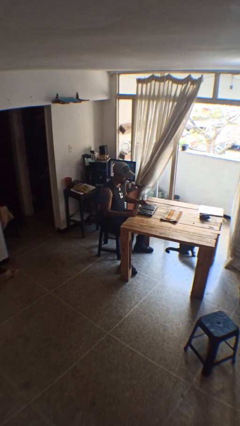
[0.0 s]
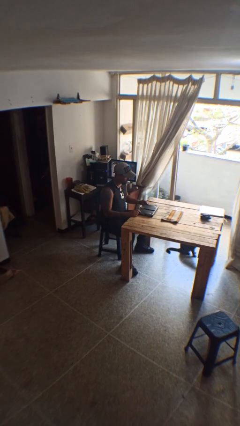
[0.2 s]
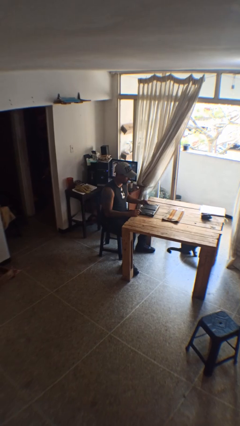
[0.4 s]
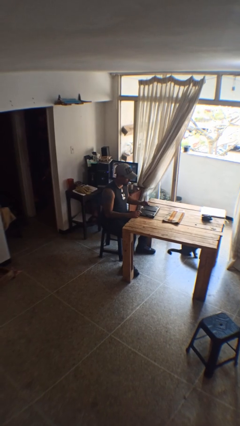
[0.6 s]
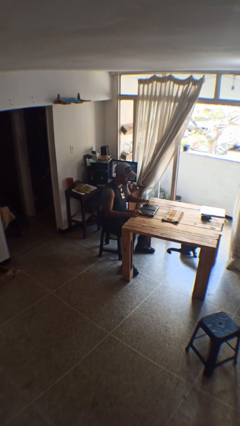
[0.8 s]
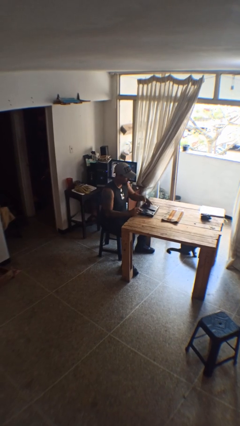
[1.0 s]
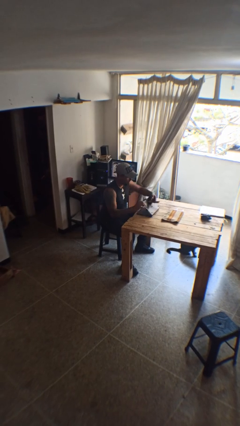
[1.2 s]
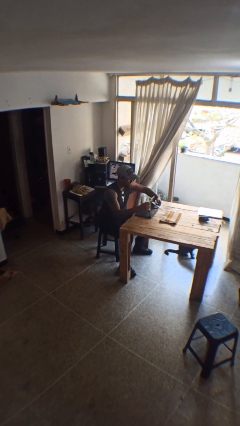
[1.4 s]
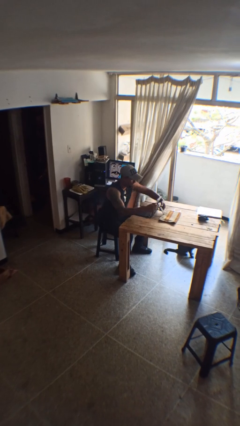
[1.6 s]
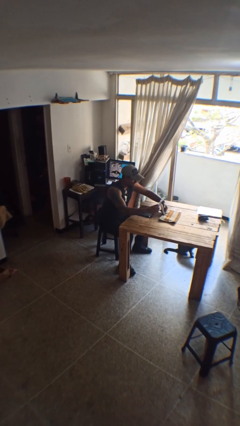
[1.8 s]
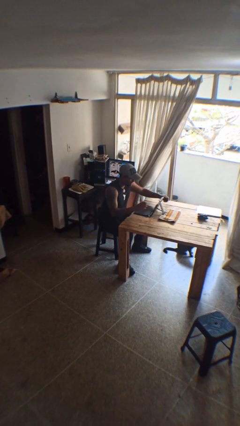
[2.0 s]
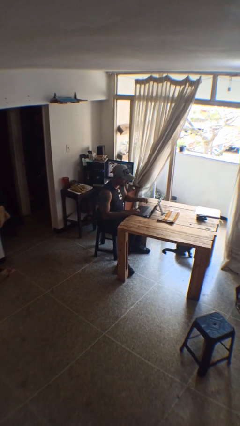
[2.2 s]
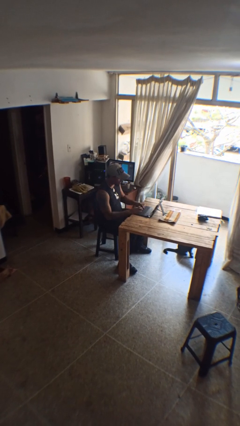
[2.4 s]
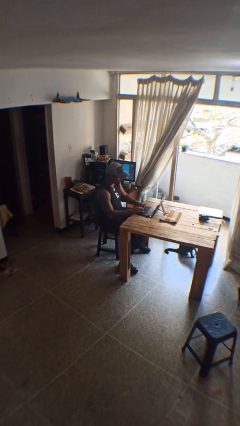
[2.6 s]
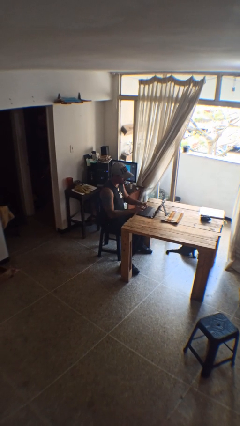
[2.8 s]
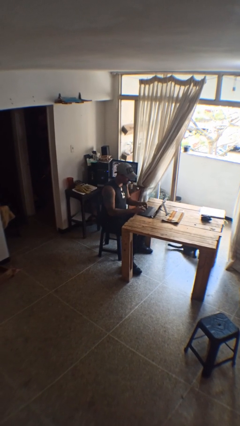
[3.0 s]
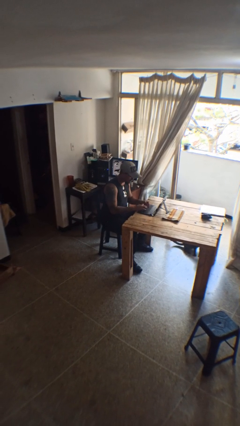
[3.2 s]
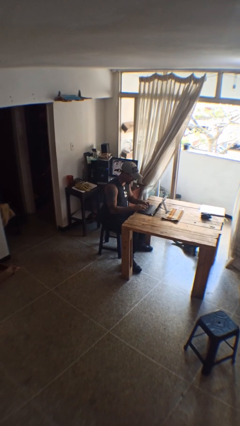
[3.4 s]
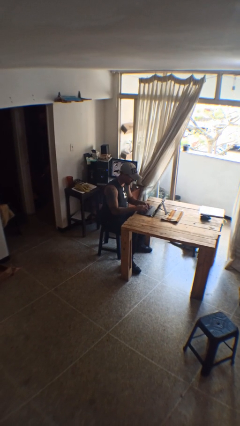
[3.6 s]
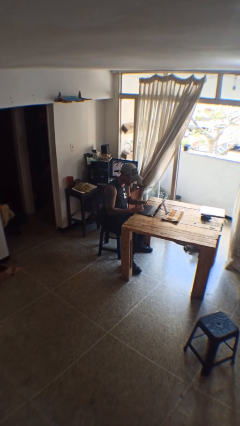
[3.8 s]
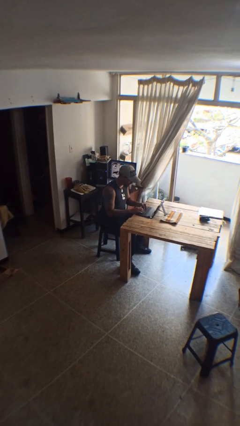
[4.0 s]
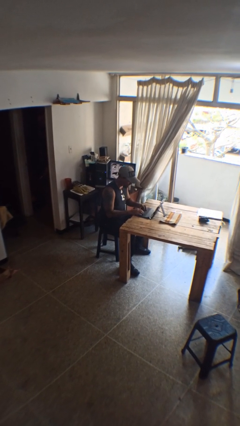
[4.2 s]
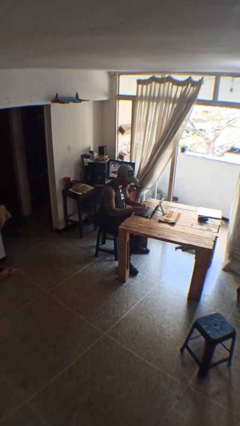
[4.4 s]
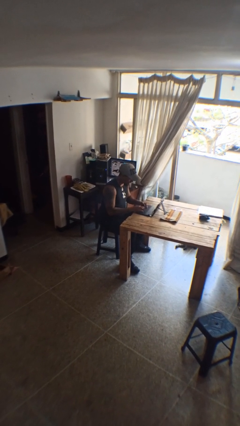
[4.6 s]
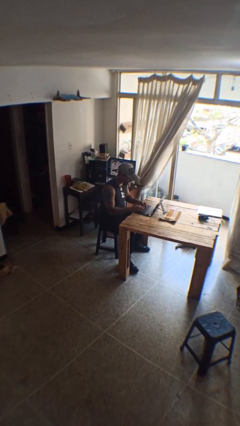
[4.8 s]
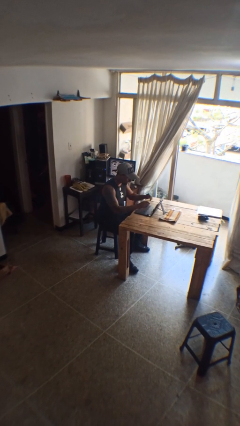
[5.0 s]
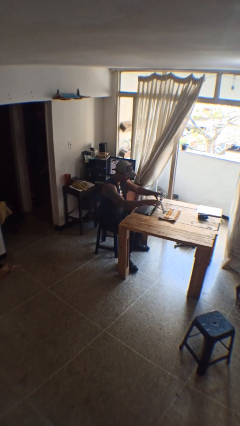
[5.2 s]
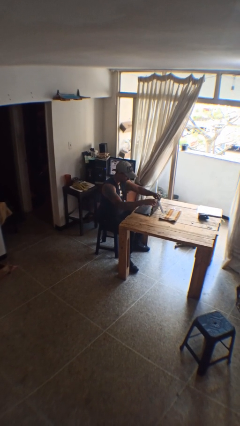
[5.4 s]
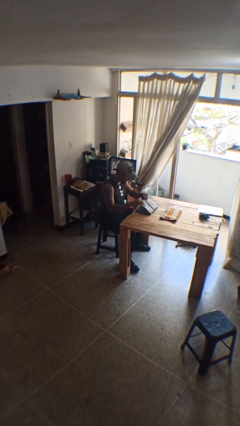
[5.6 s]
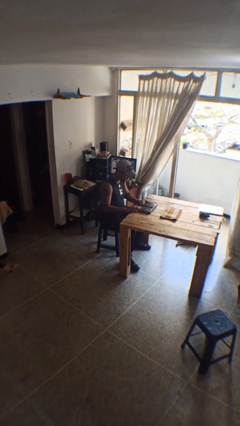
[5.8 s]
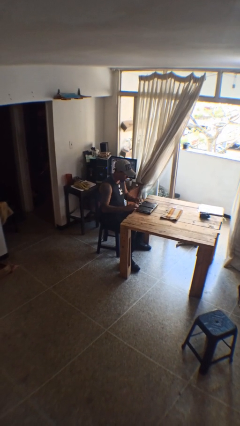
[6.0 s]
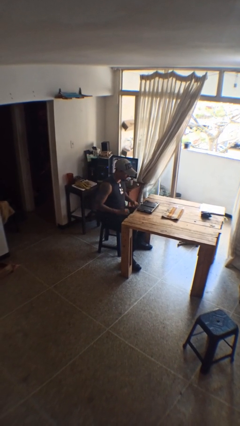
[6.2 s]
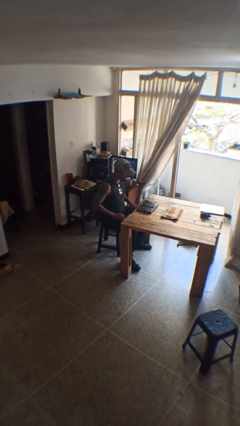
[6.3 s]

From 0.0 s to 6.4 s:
person interacts with laptop

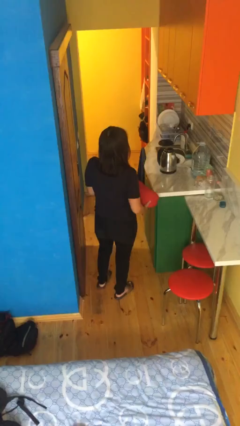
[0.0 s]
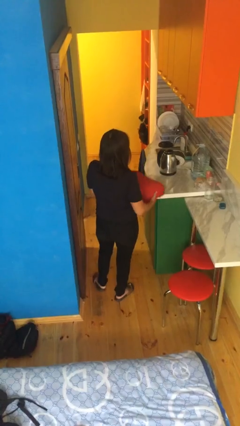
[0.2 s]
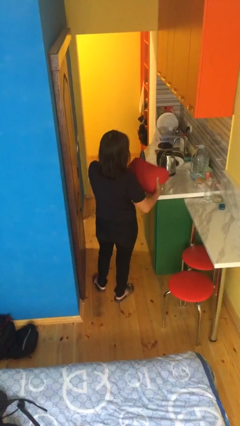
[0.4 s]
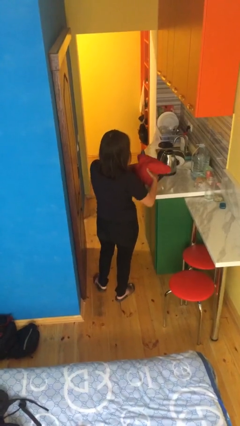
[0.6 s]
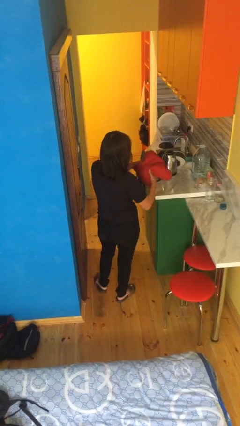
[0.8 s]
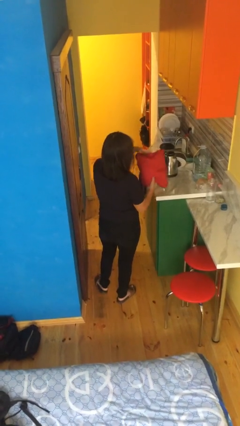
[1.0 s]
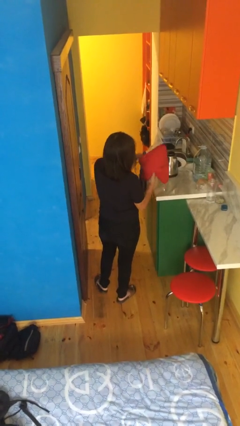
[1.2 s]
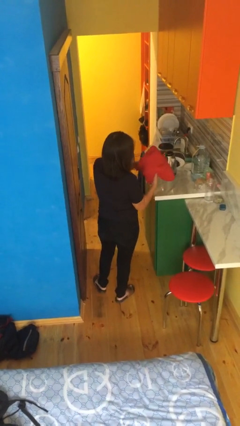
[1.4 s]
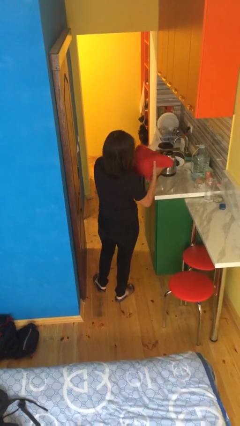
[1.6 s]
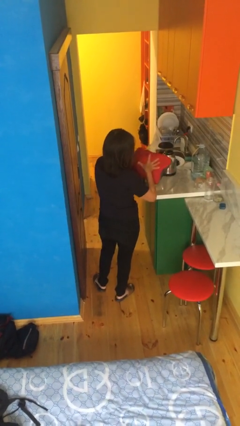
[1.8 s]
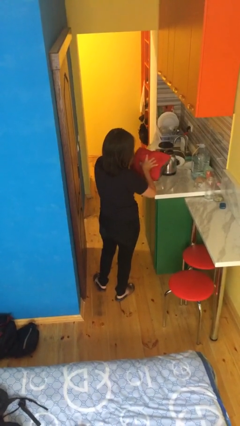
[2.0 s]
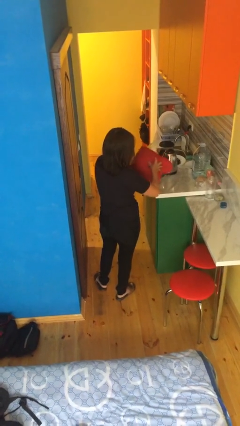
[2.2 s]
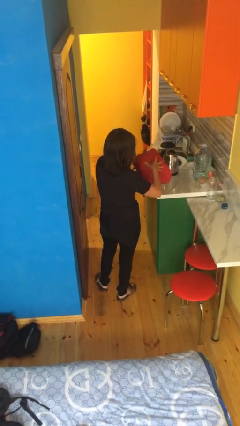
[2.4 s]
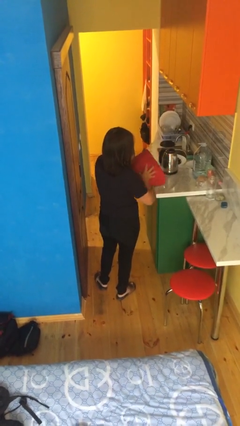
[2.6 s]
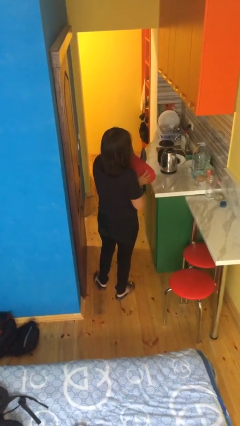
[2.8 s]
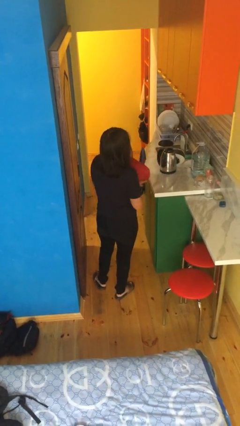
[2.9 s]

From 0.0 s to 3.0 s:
person squeezes object

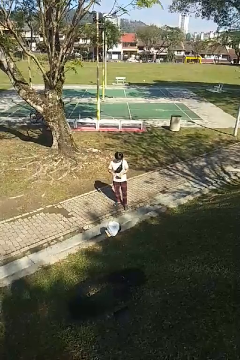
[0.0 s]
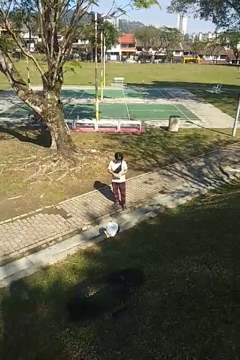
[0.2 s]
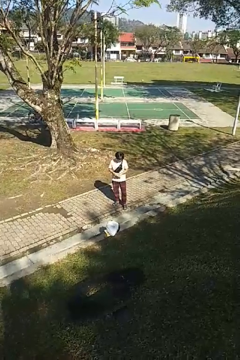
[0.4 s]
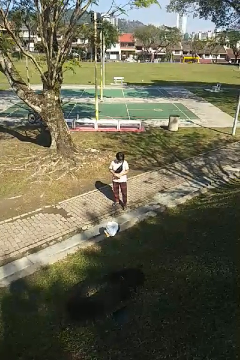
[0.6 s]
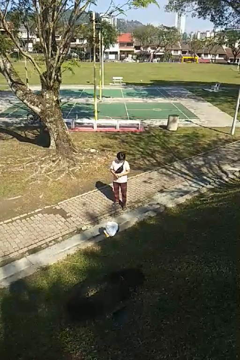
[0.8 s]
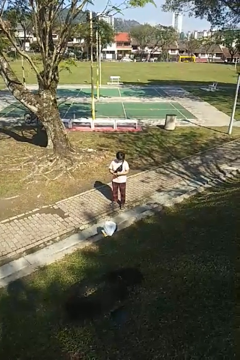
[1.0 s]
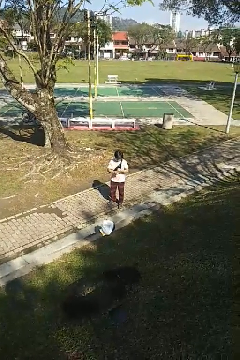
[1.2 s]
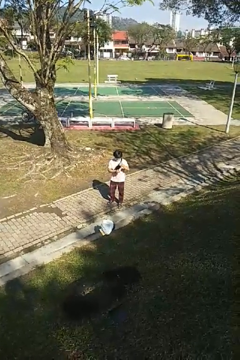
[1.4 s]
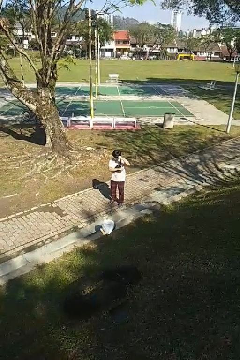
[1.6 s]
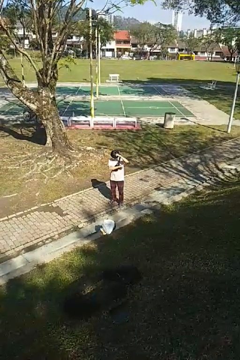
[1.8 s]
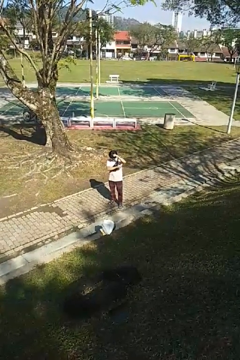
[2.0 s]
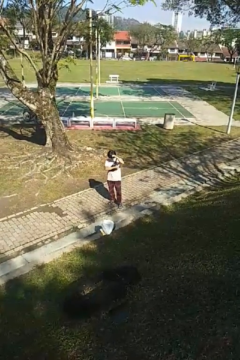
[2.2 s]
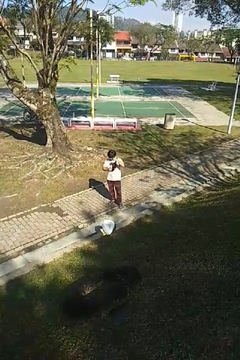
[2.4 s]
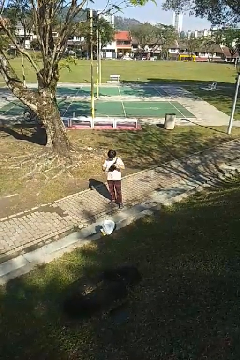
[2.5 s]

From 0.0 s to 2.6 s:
person applies deodorant

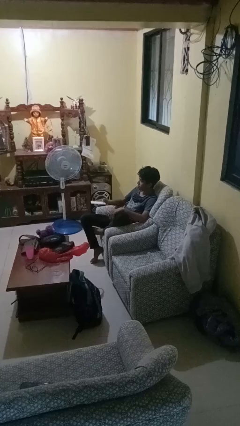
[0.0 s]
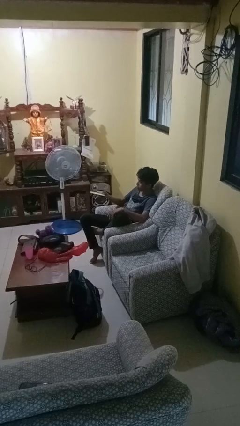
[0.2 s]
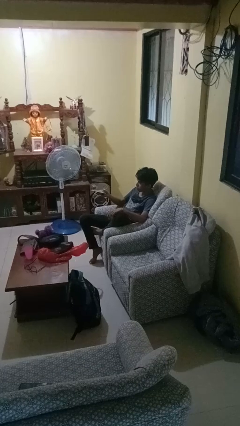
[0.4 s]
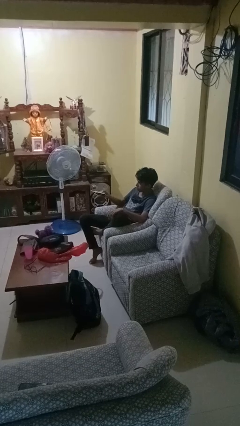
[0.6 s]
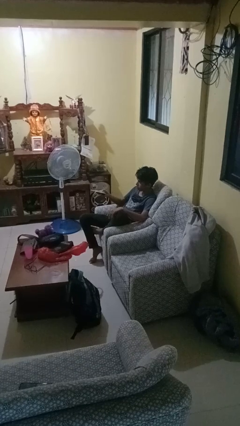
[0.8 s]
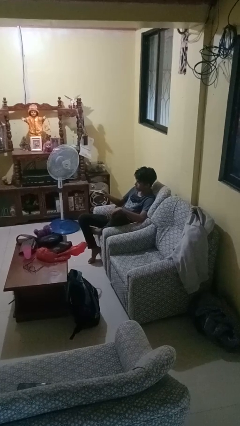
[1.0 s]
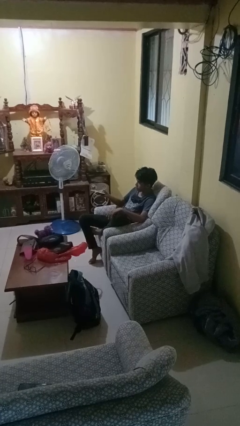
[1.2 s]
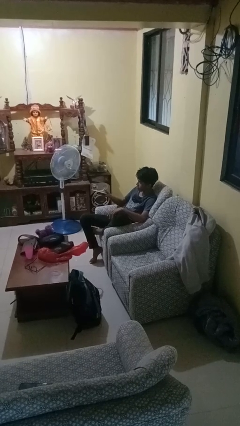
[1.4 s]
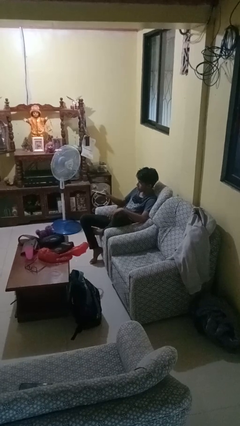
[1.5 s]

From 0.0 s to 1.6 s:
person uses television remote

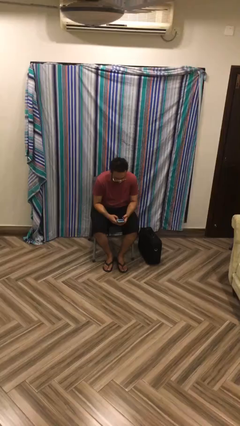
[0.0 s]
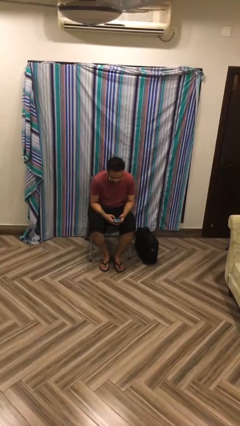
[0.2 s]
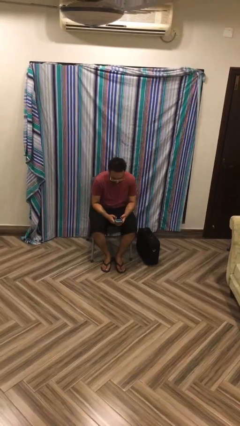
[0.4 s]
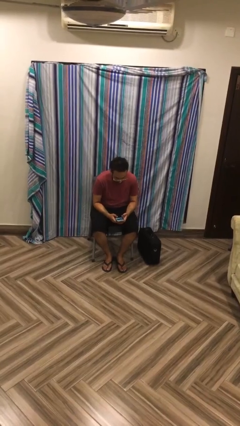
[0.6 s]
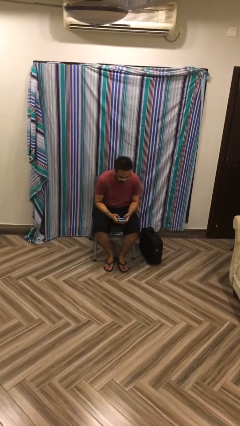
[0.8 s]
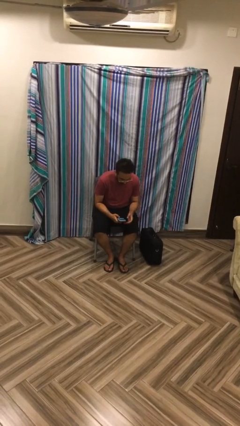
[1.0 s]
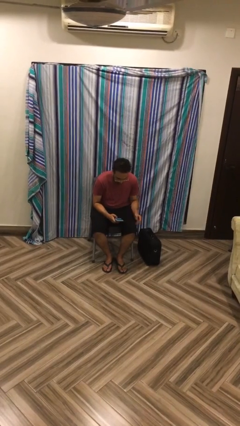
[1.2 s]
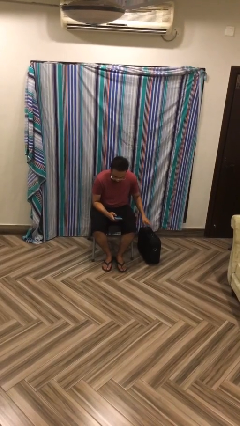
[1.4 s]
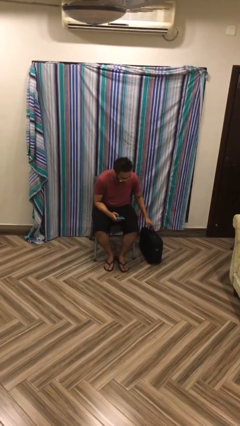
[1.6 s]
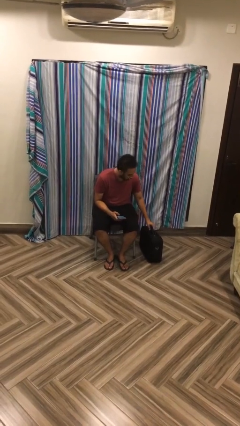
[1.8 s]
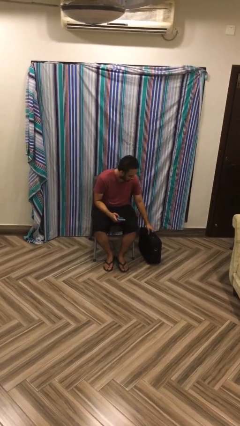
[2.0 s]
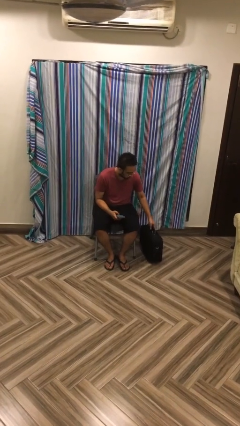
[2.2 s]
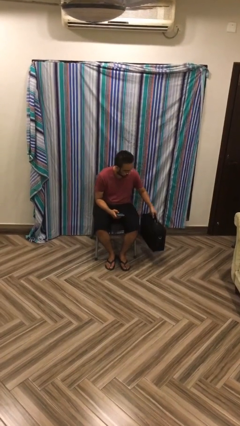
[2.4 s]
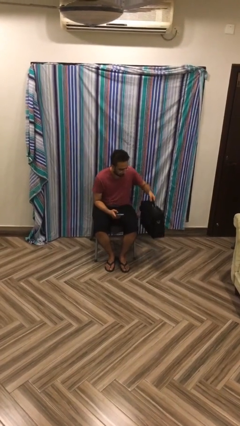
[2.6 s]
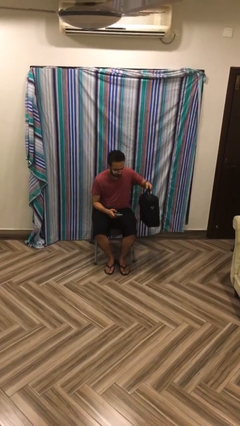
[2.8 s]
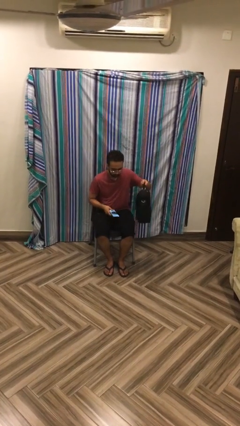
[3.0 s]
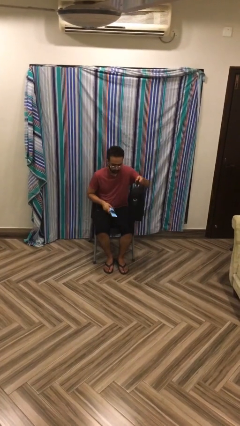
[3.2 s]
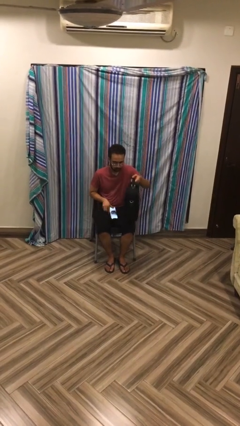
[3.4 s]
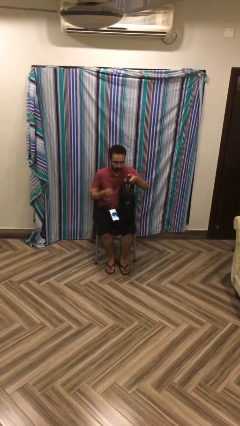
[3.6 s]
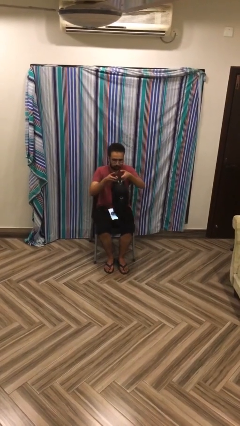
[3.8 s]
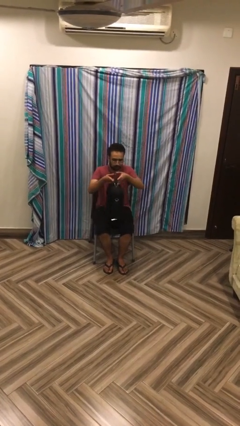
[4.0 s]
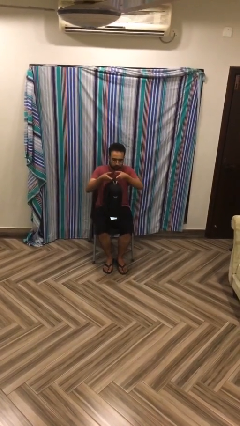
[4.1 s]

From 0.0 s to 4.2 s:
person picks up object from floor

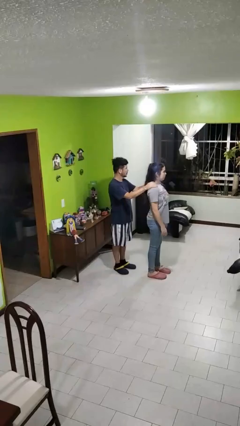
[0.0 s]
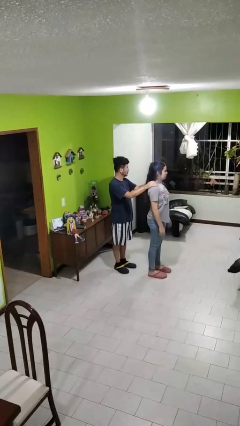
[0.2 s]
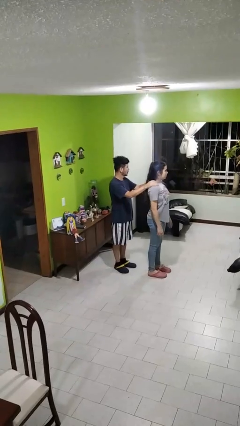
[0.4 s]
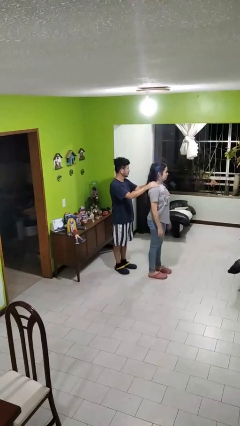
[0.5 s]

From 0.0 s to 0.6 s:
person grabs person by shoulder
